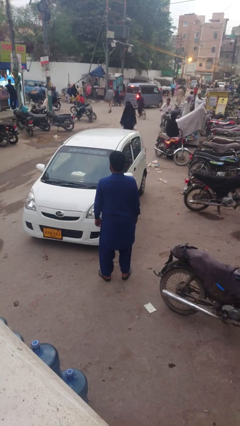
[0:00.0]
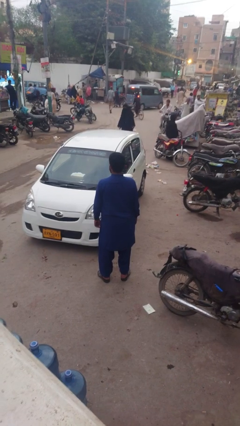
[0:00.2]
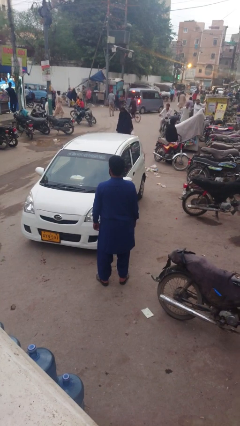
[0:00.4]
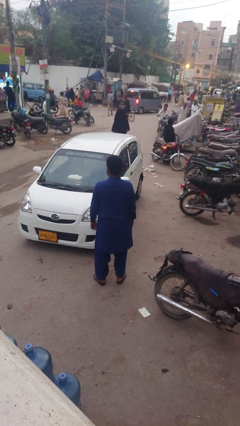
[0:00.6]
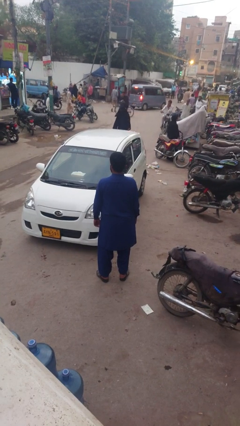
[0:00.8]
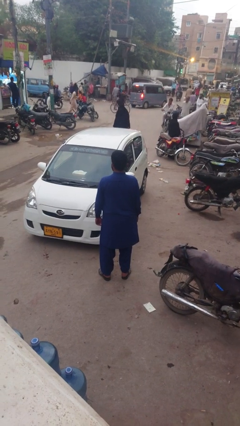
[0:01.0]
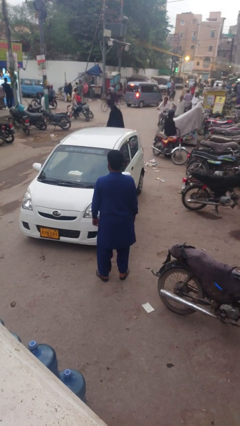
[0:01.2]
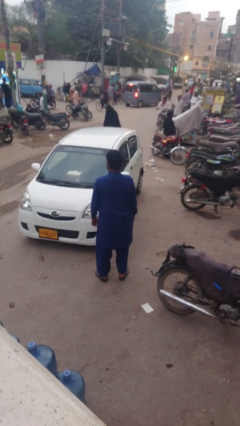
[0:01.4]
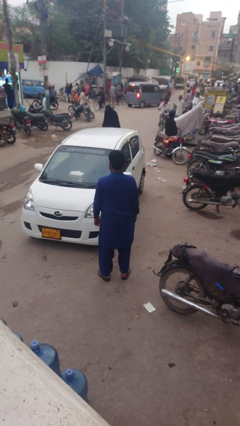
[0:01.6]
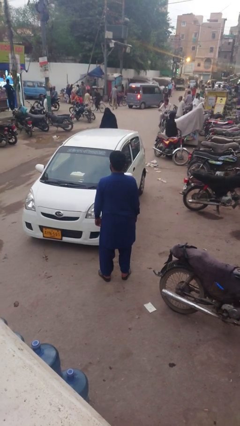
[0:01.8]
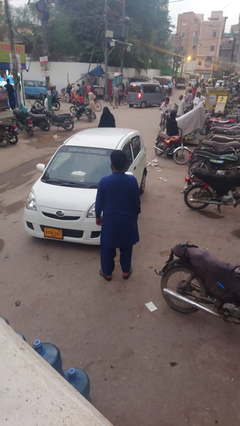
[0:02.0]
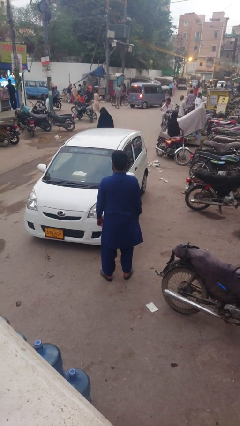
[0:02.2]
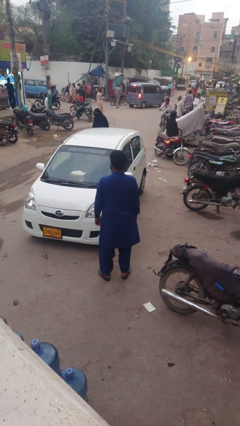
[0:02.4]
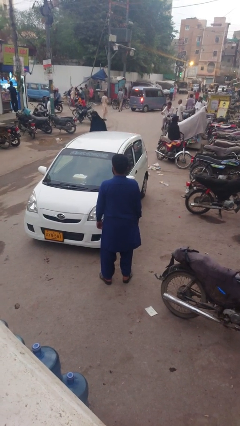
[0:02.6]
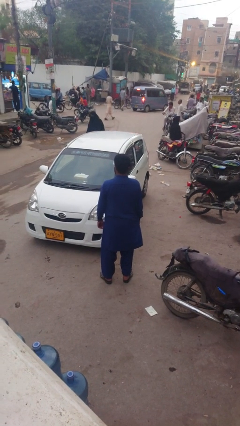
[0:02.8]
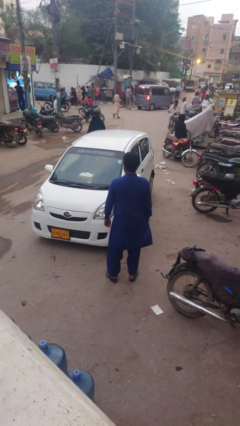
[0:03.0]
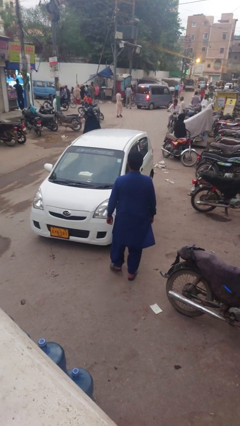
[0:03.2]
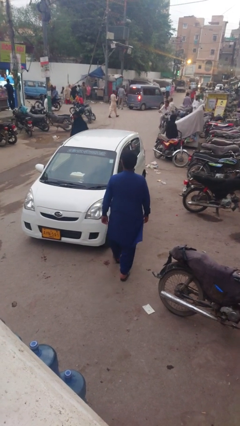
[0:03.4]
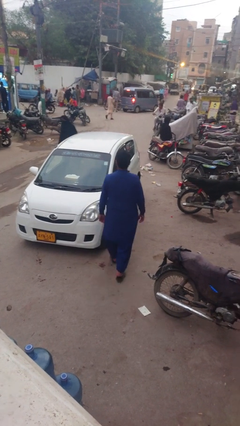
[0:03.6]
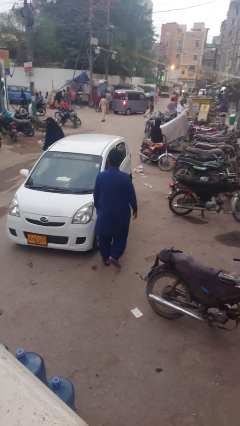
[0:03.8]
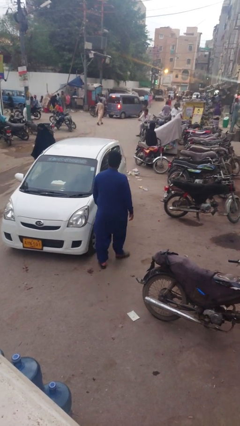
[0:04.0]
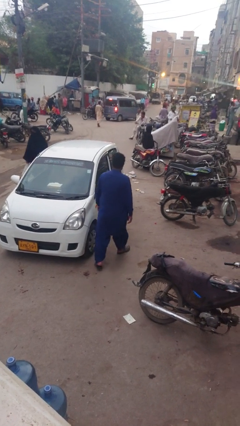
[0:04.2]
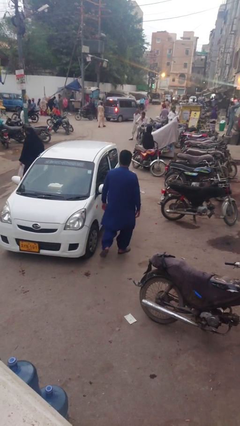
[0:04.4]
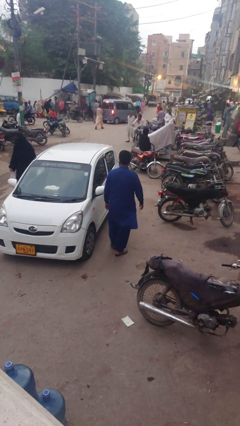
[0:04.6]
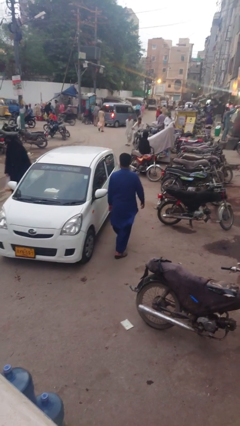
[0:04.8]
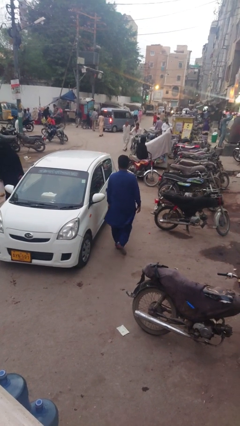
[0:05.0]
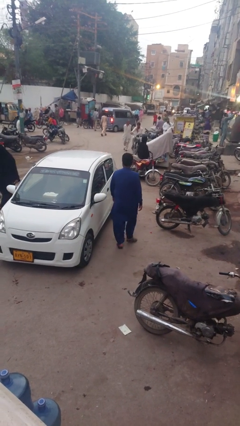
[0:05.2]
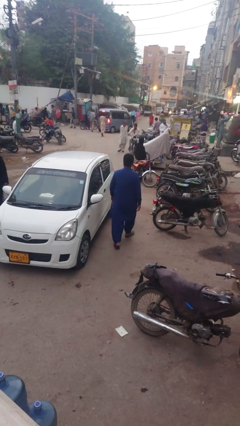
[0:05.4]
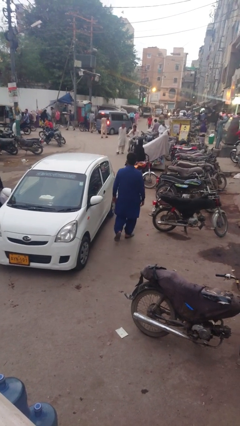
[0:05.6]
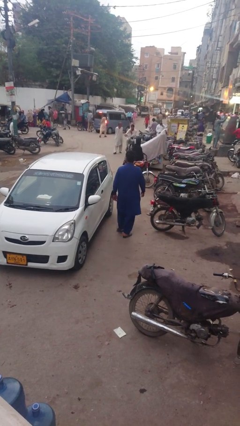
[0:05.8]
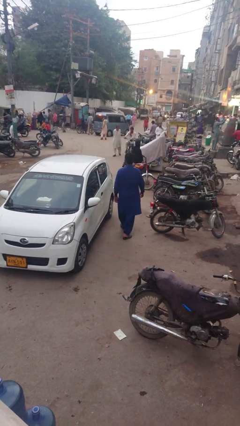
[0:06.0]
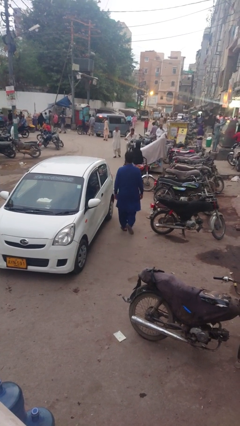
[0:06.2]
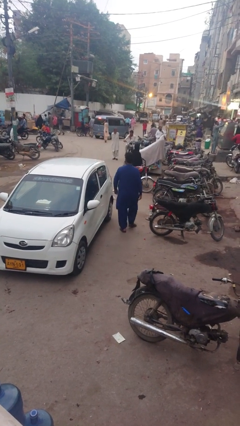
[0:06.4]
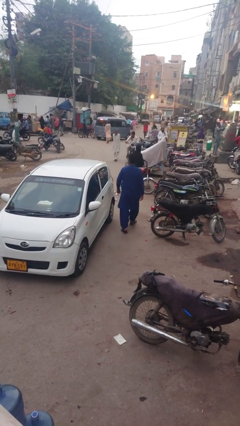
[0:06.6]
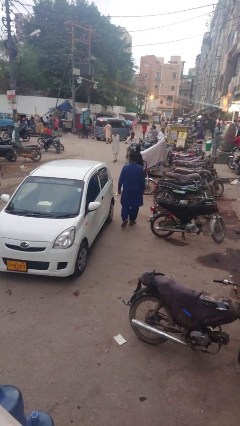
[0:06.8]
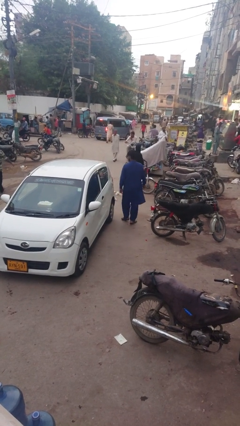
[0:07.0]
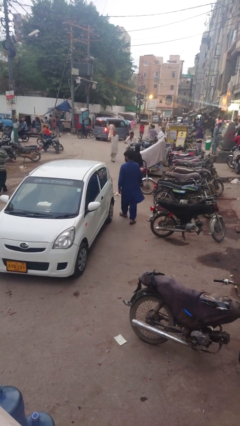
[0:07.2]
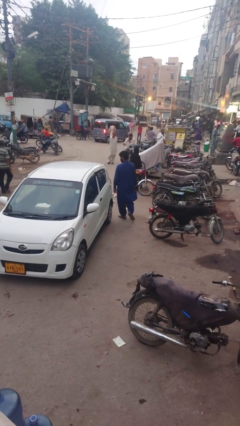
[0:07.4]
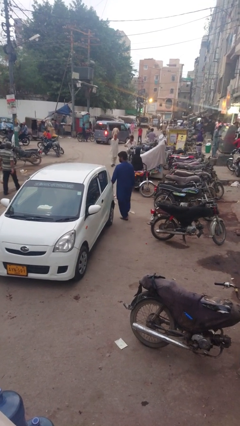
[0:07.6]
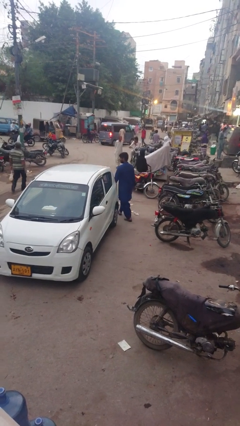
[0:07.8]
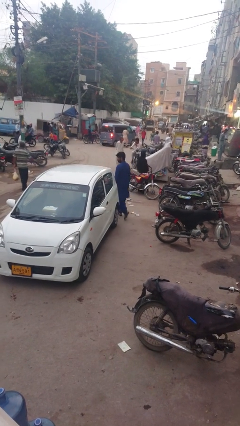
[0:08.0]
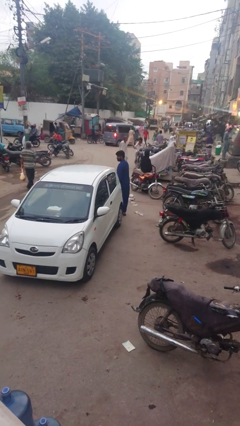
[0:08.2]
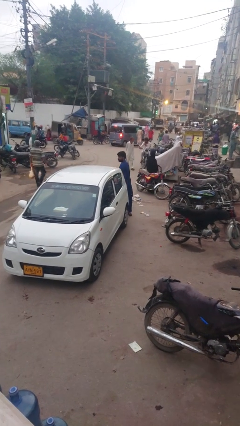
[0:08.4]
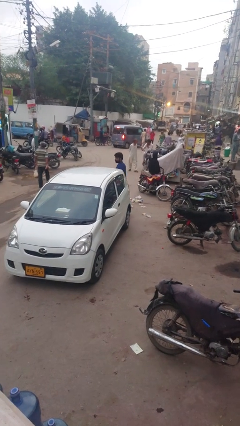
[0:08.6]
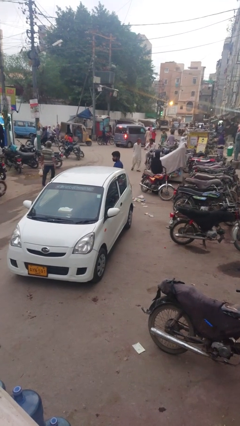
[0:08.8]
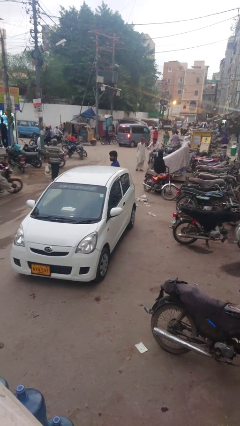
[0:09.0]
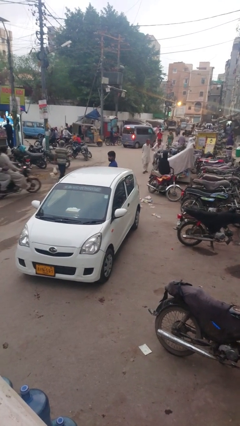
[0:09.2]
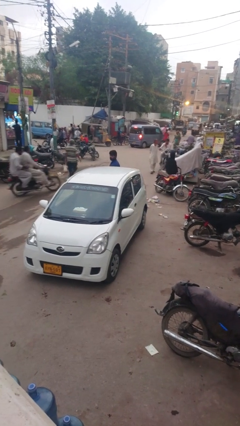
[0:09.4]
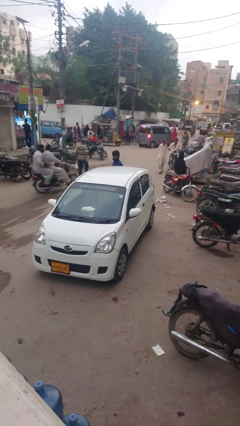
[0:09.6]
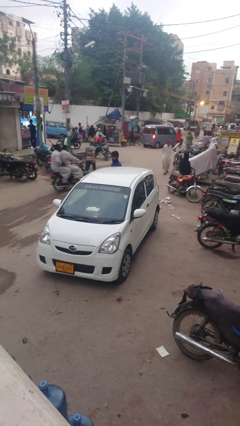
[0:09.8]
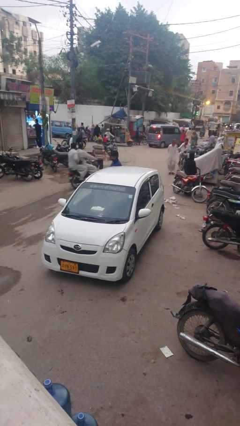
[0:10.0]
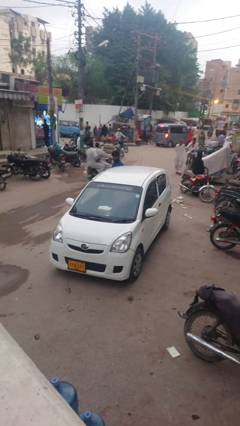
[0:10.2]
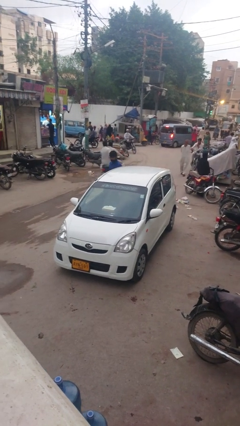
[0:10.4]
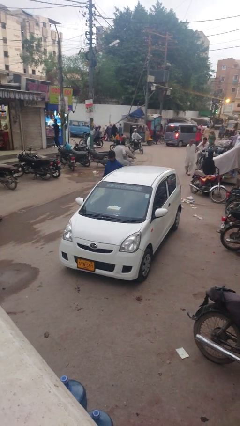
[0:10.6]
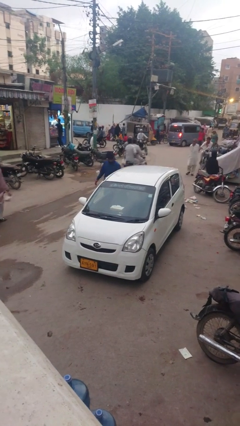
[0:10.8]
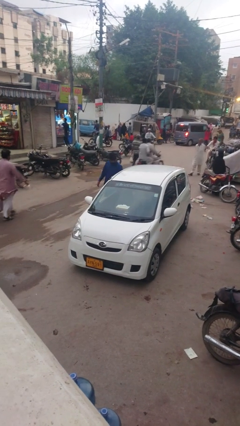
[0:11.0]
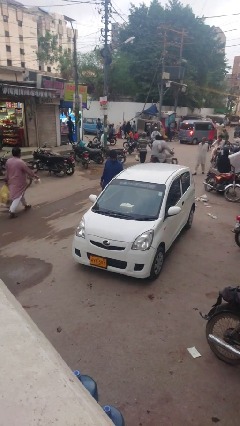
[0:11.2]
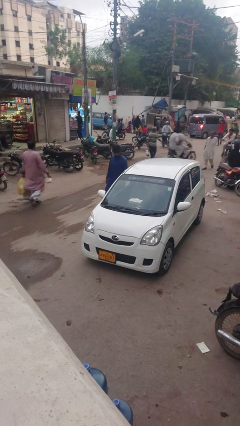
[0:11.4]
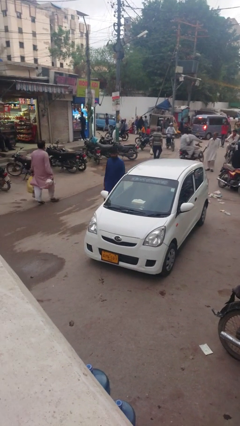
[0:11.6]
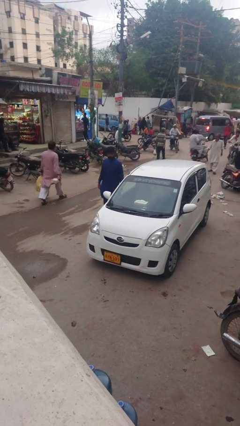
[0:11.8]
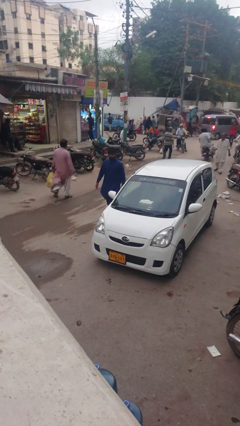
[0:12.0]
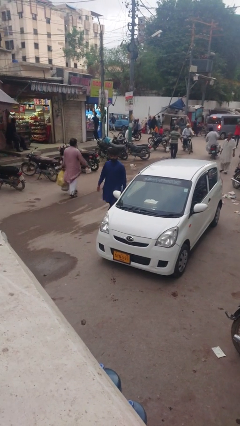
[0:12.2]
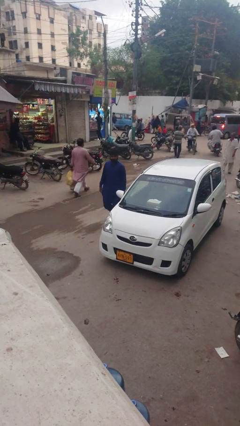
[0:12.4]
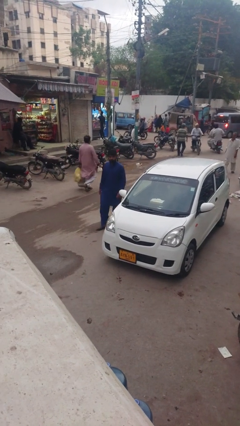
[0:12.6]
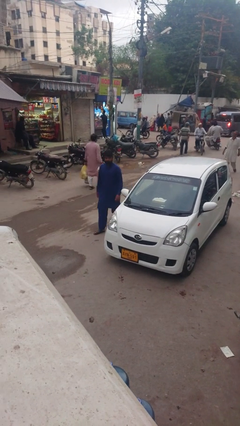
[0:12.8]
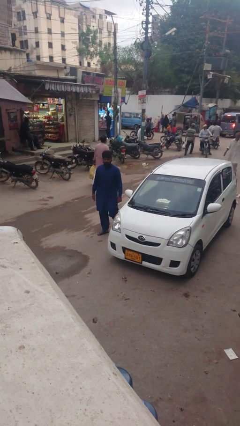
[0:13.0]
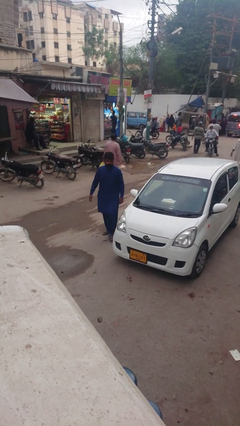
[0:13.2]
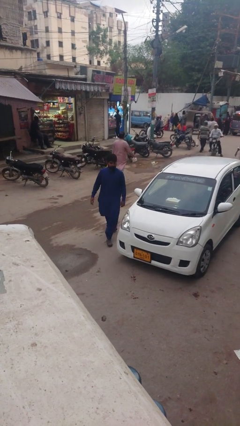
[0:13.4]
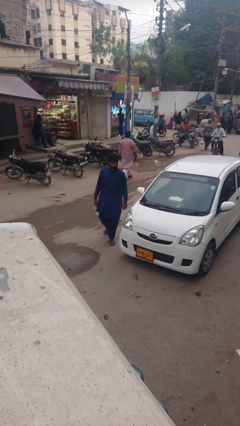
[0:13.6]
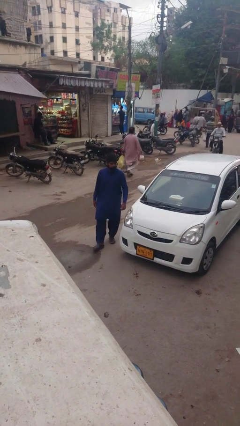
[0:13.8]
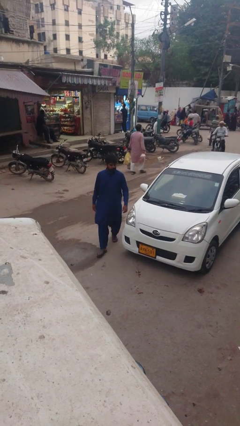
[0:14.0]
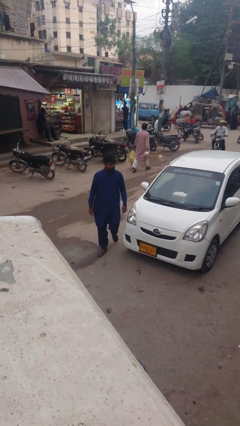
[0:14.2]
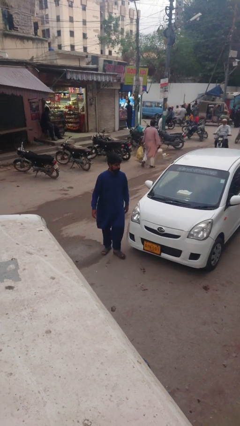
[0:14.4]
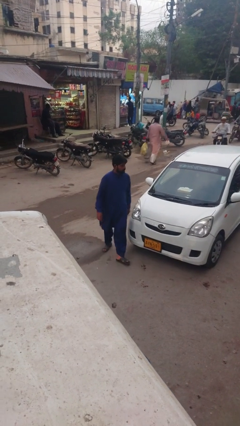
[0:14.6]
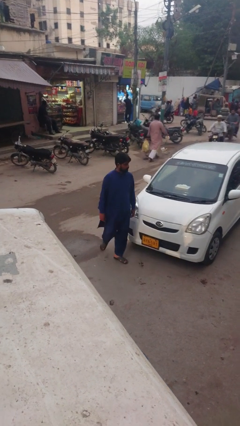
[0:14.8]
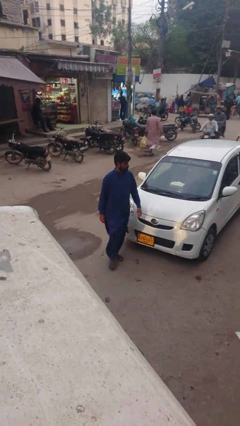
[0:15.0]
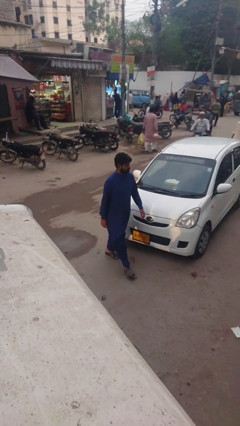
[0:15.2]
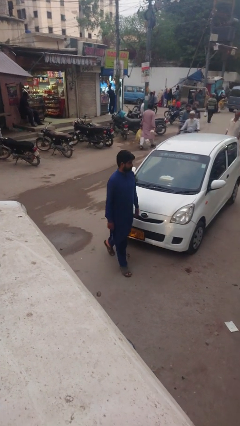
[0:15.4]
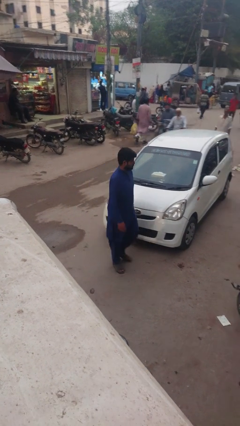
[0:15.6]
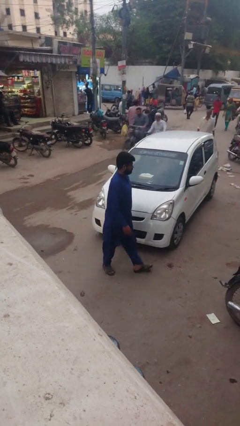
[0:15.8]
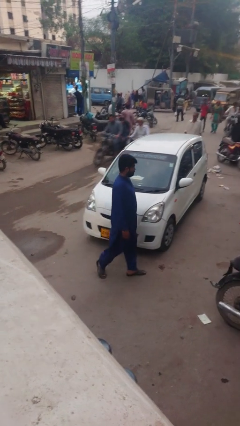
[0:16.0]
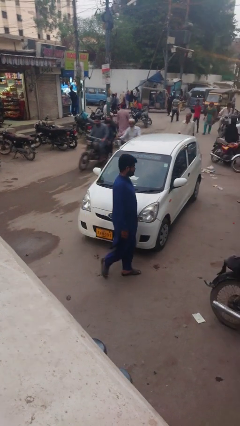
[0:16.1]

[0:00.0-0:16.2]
person walks around car

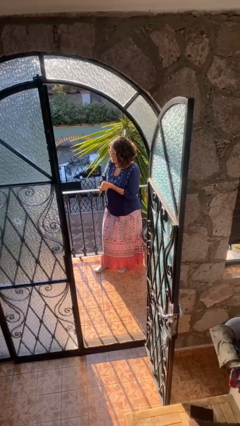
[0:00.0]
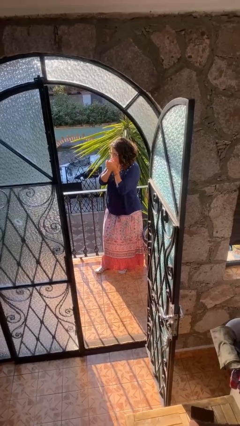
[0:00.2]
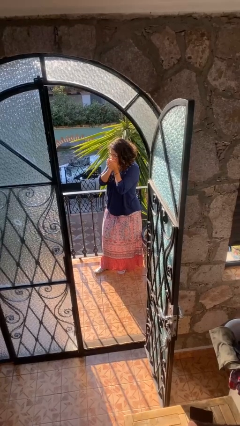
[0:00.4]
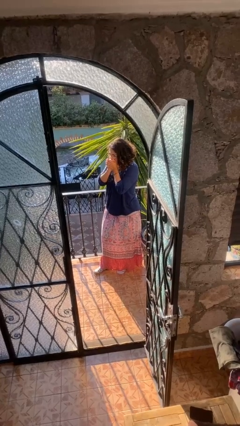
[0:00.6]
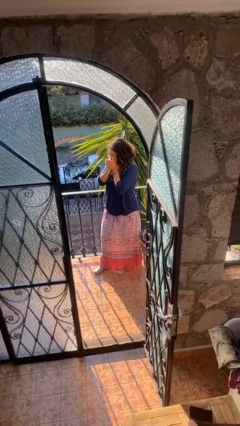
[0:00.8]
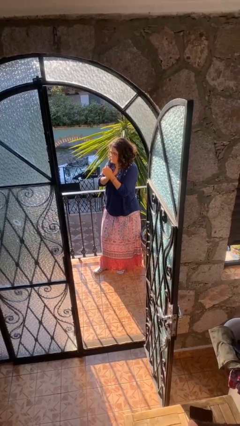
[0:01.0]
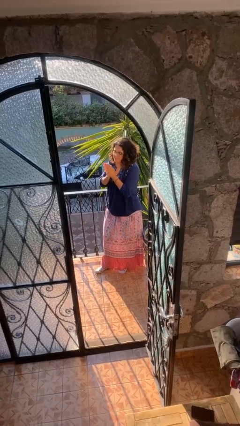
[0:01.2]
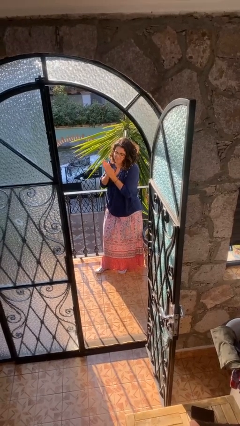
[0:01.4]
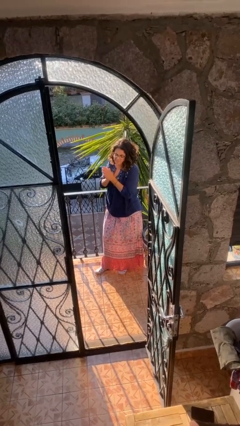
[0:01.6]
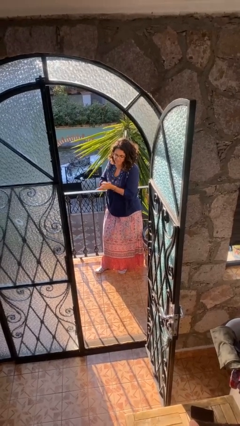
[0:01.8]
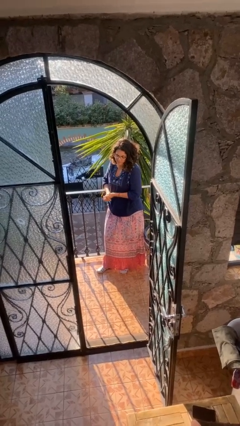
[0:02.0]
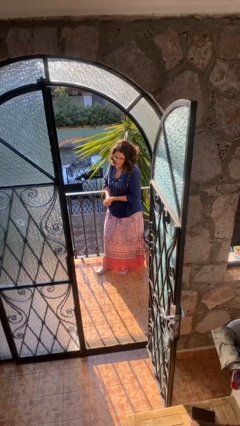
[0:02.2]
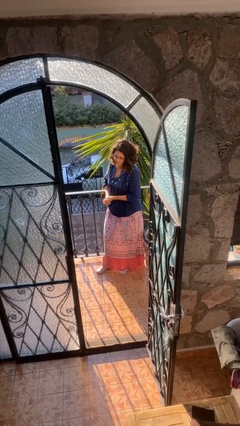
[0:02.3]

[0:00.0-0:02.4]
person blows into hands
